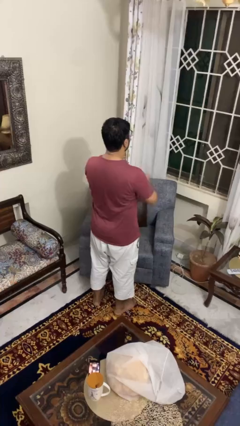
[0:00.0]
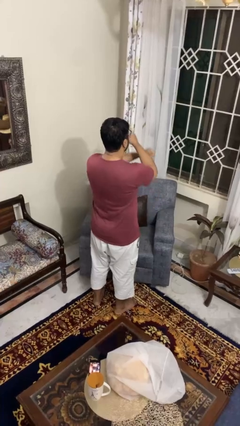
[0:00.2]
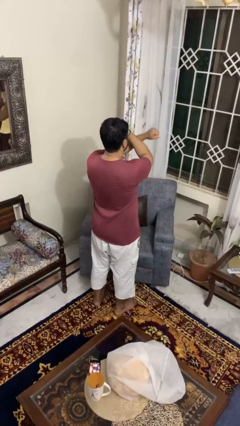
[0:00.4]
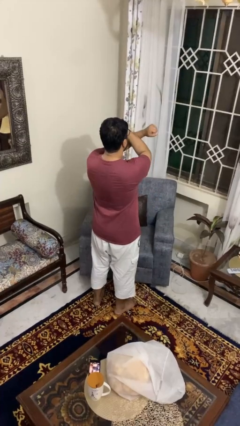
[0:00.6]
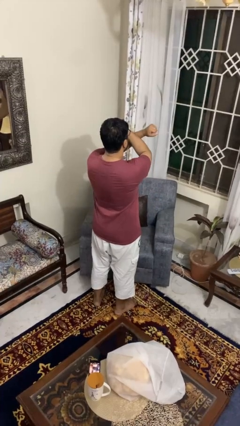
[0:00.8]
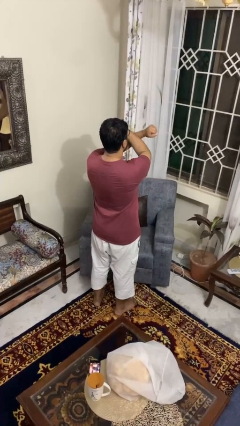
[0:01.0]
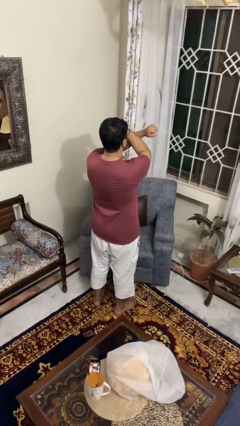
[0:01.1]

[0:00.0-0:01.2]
person gestures arms x

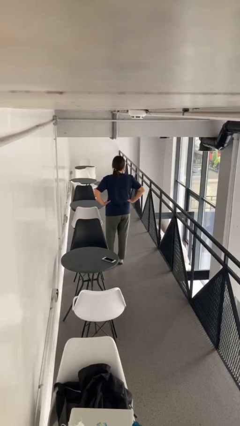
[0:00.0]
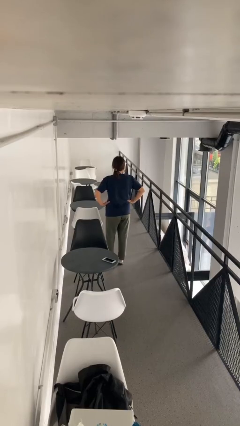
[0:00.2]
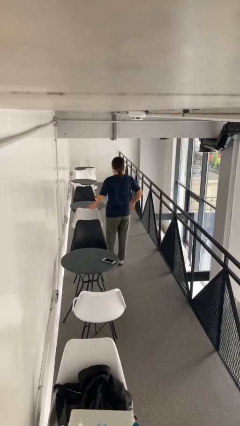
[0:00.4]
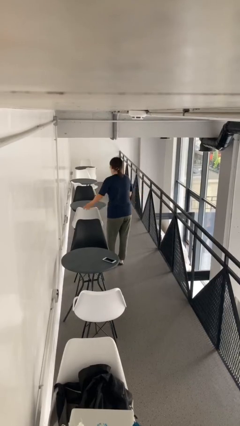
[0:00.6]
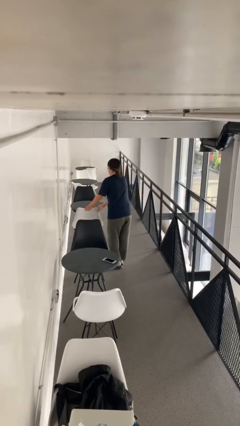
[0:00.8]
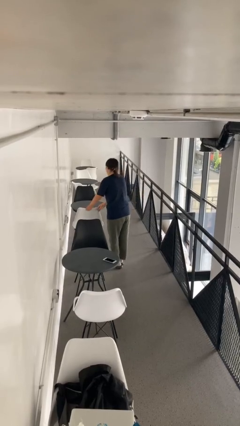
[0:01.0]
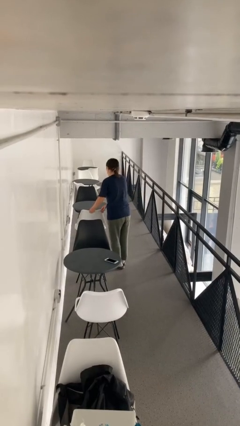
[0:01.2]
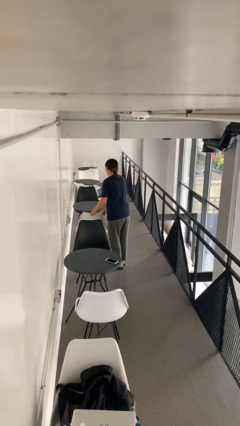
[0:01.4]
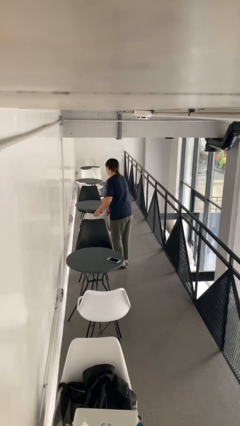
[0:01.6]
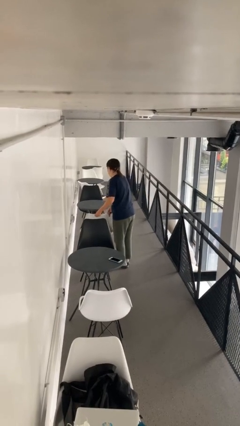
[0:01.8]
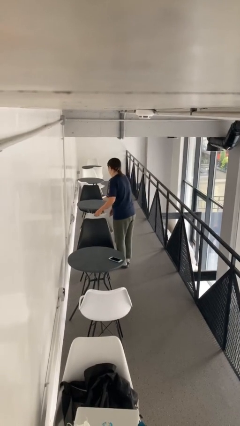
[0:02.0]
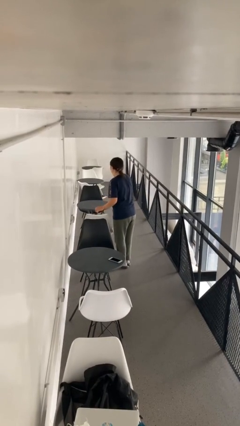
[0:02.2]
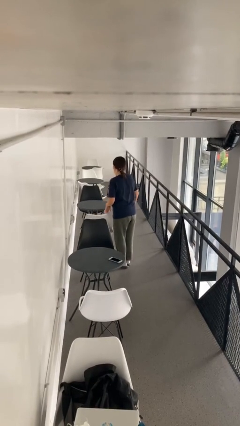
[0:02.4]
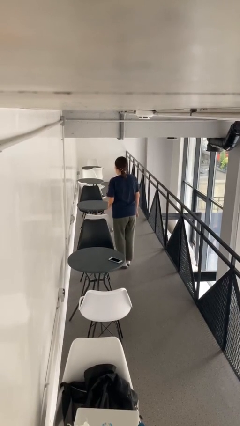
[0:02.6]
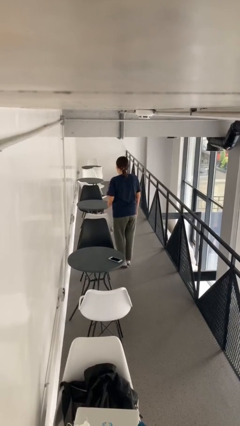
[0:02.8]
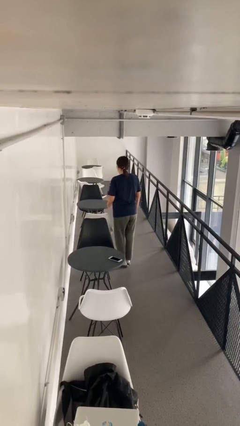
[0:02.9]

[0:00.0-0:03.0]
person pulls out chair

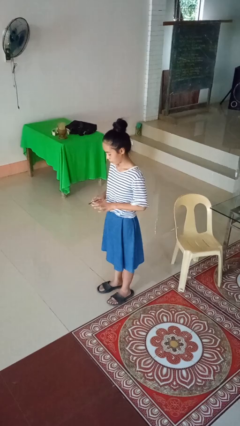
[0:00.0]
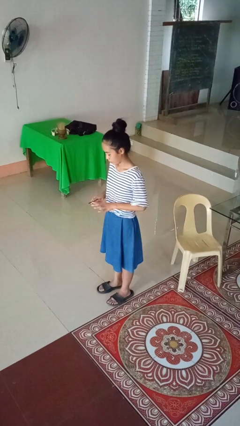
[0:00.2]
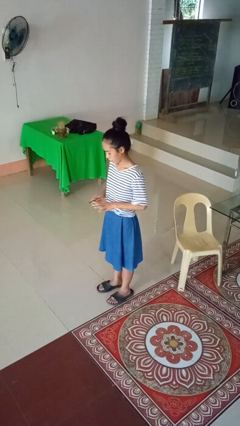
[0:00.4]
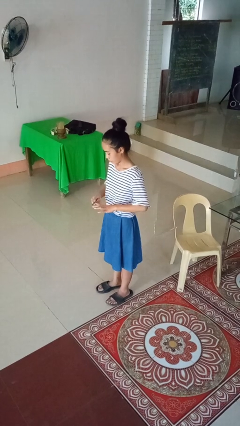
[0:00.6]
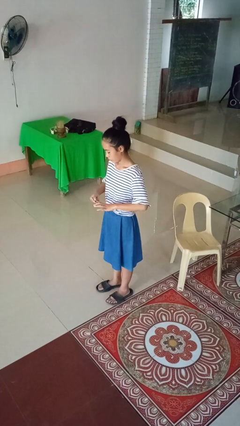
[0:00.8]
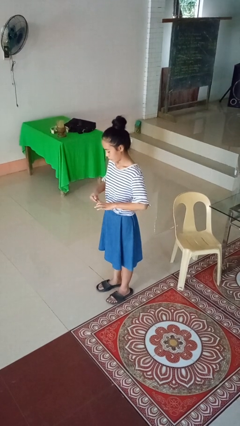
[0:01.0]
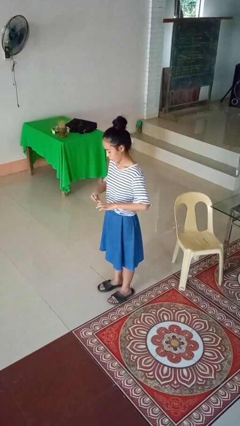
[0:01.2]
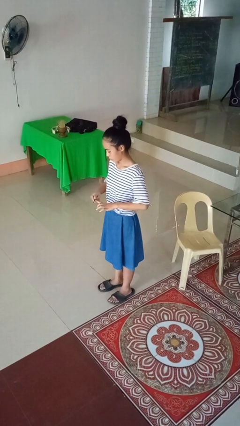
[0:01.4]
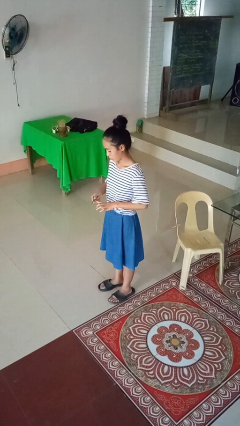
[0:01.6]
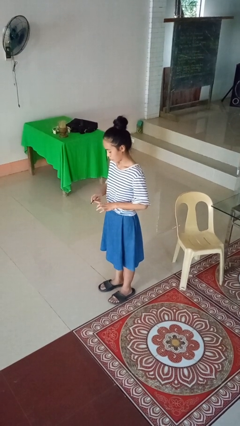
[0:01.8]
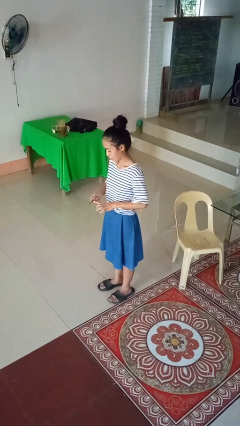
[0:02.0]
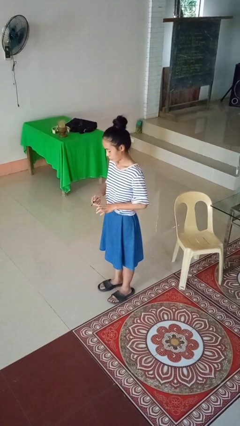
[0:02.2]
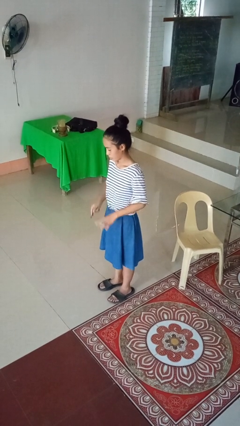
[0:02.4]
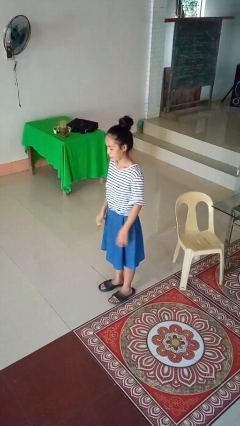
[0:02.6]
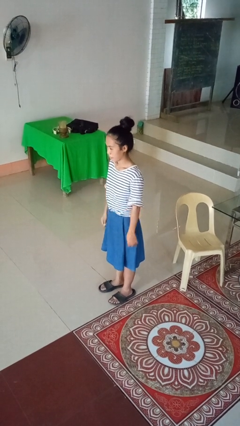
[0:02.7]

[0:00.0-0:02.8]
person files fingernails

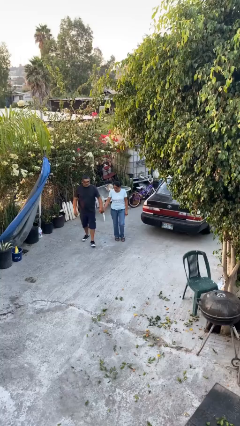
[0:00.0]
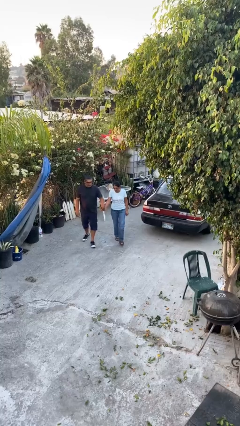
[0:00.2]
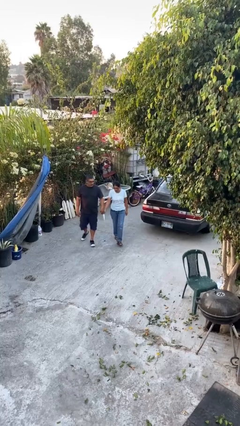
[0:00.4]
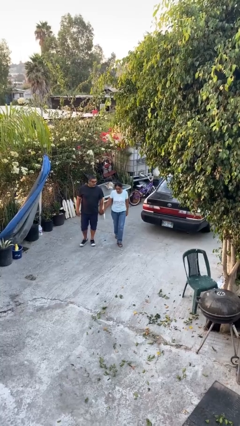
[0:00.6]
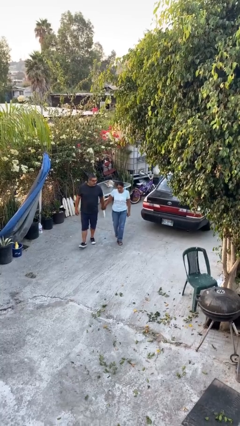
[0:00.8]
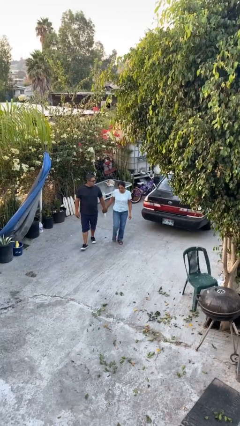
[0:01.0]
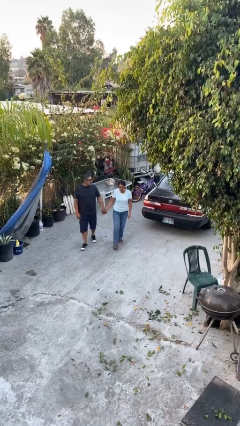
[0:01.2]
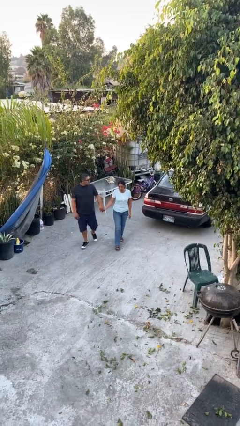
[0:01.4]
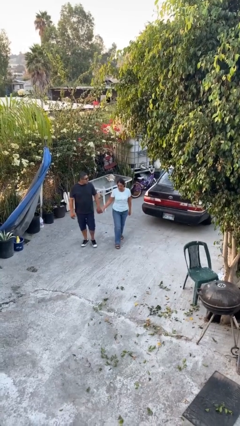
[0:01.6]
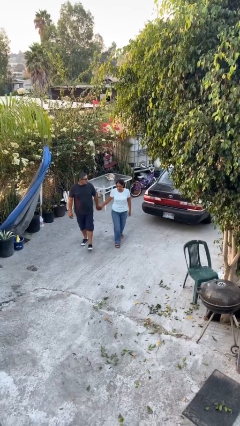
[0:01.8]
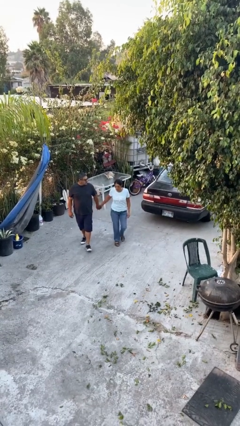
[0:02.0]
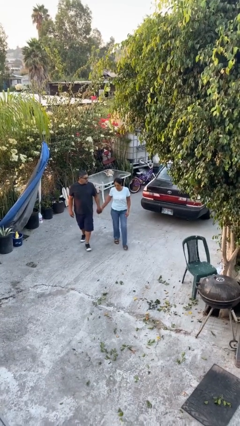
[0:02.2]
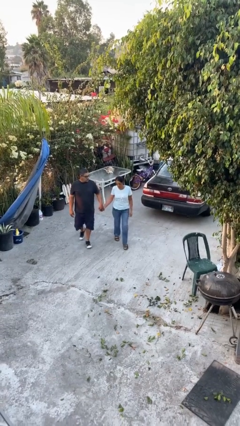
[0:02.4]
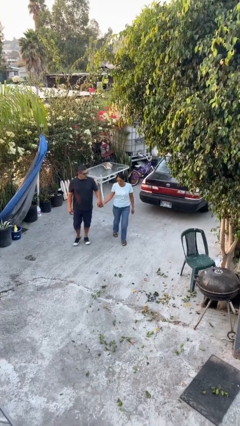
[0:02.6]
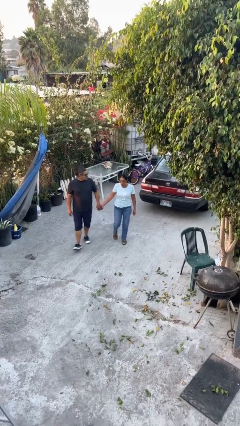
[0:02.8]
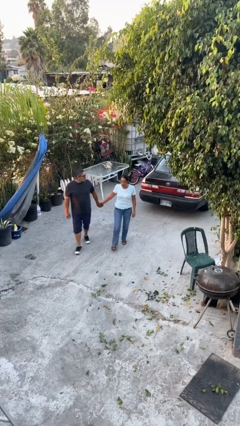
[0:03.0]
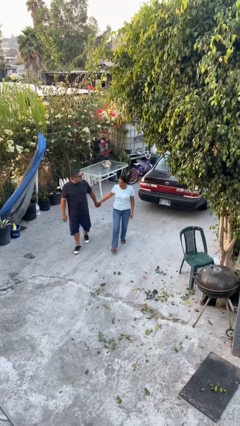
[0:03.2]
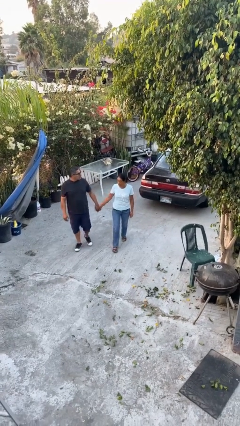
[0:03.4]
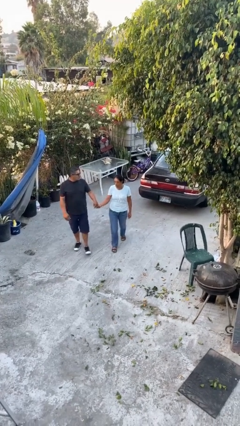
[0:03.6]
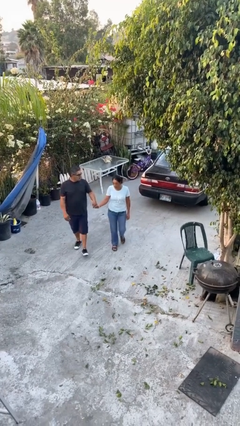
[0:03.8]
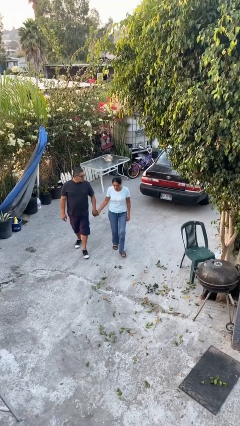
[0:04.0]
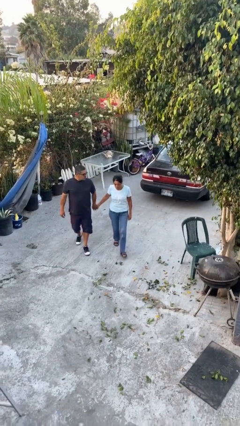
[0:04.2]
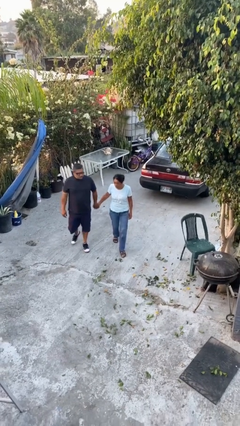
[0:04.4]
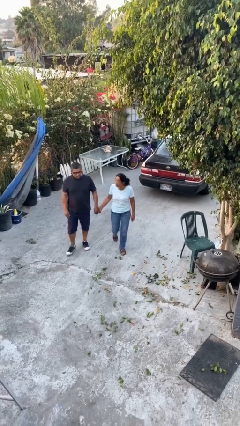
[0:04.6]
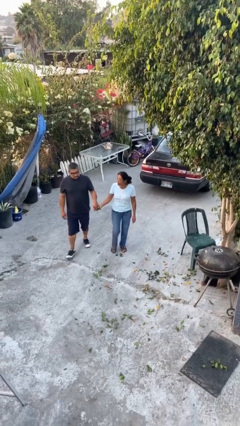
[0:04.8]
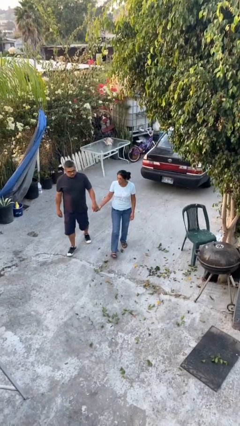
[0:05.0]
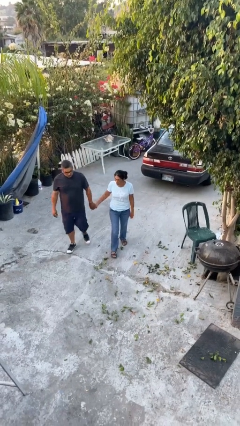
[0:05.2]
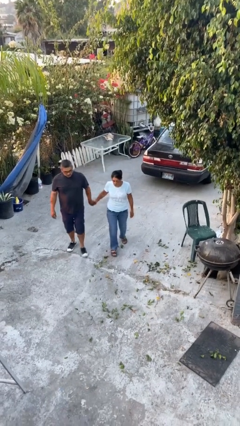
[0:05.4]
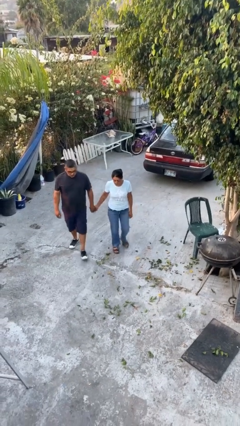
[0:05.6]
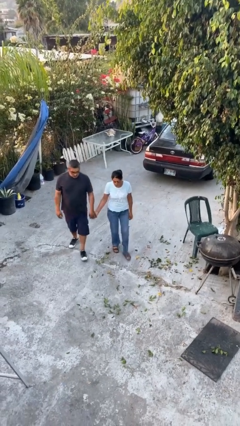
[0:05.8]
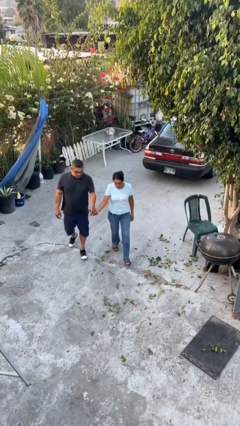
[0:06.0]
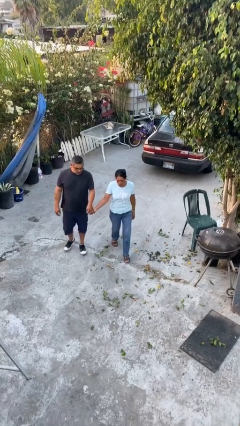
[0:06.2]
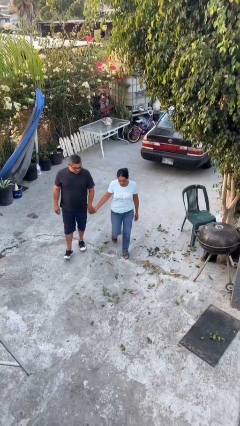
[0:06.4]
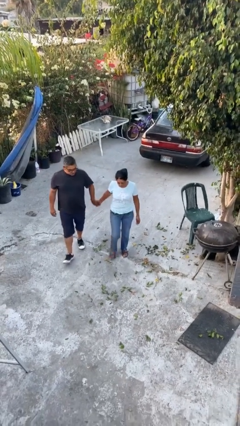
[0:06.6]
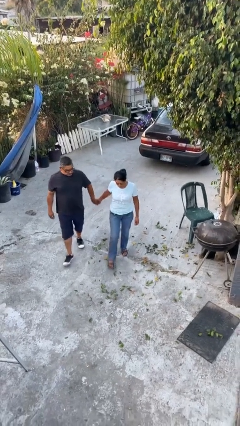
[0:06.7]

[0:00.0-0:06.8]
person holds hand

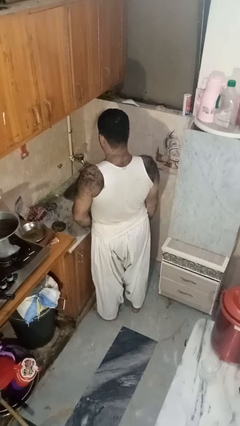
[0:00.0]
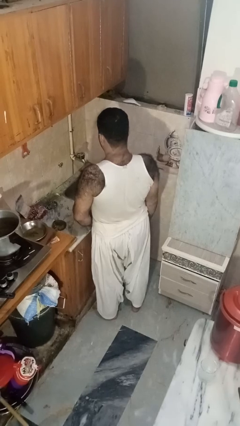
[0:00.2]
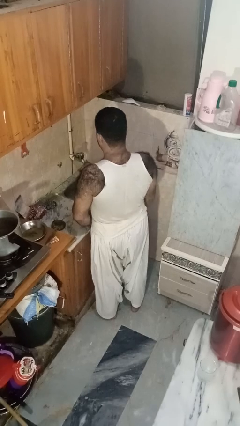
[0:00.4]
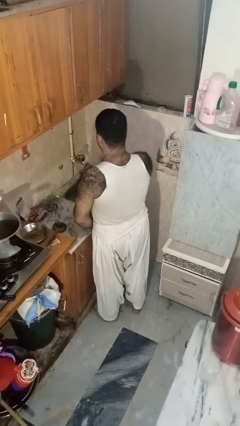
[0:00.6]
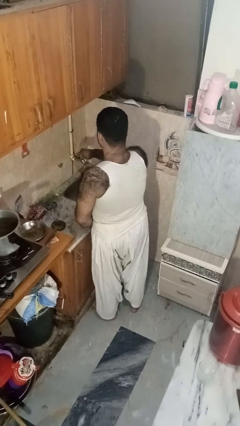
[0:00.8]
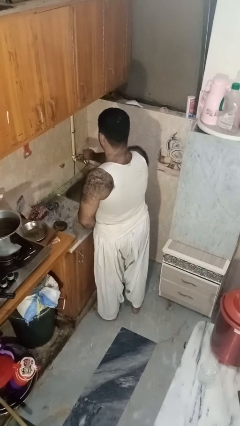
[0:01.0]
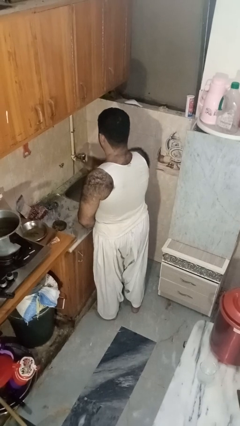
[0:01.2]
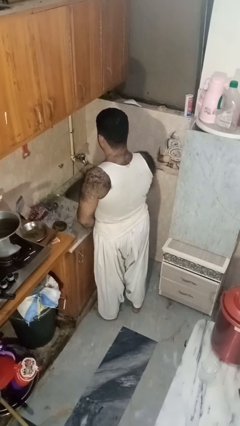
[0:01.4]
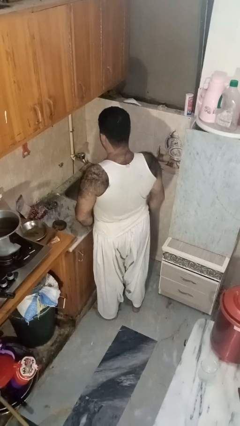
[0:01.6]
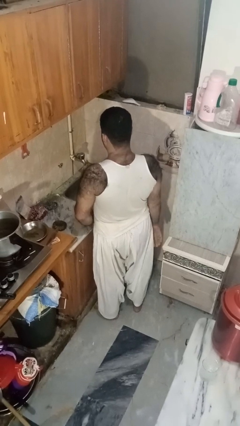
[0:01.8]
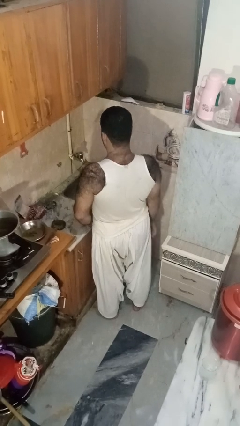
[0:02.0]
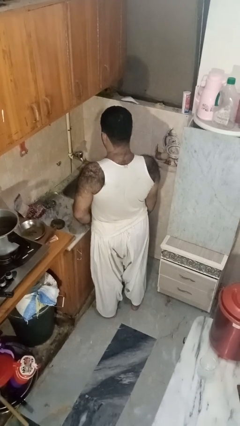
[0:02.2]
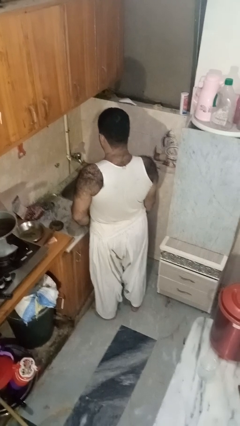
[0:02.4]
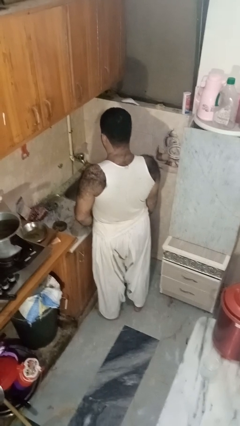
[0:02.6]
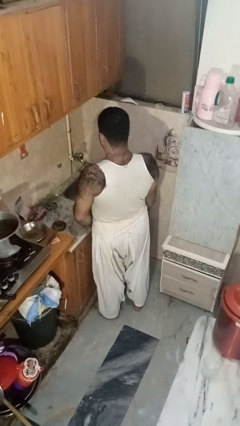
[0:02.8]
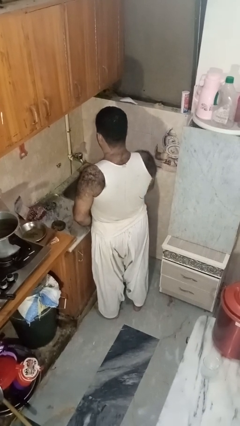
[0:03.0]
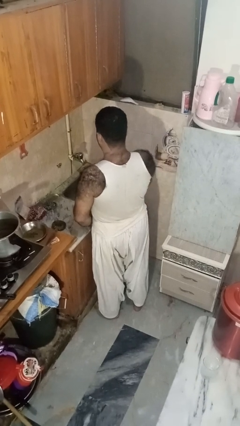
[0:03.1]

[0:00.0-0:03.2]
person turns off faucet

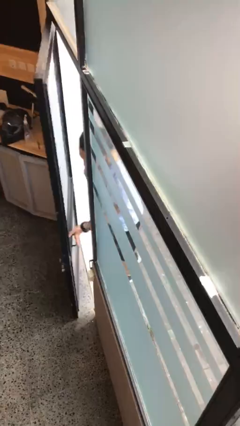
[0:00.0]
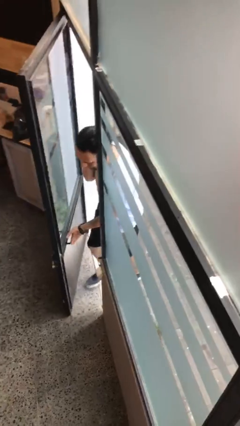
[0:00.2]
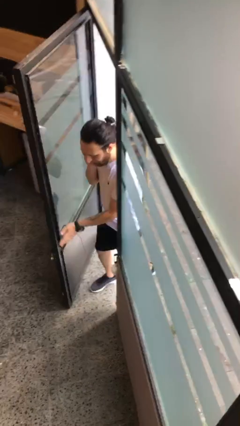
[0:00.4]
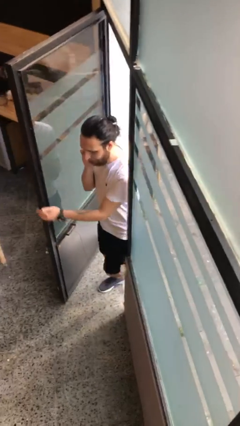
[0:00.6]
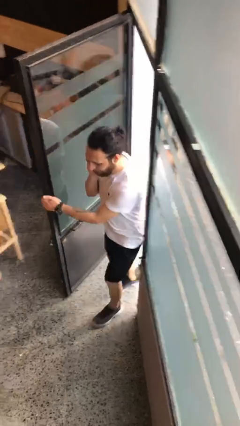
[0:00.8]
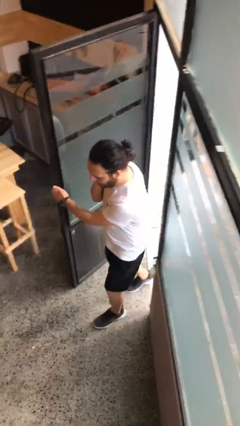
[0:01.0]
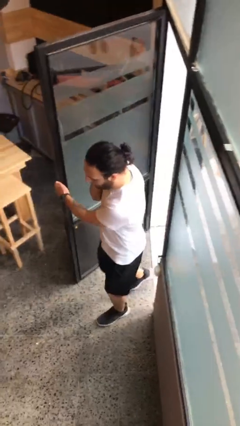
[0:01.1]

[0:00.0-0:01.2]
person opens facility door
